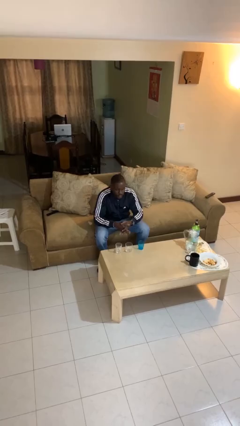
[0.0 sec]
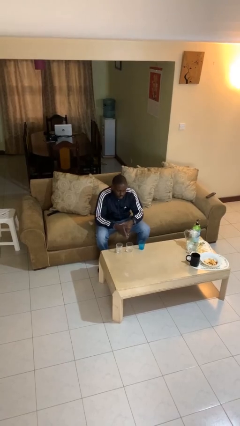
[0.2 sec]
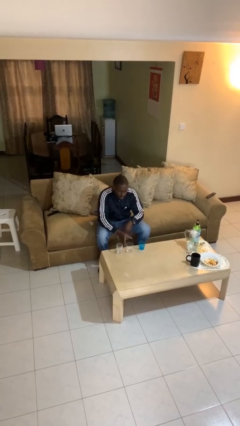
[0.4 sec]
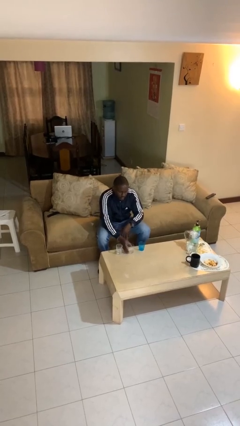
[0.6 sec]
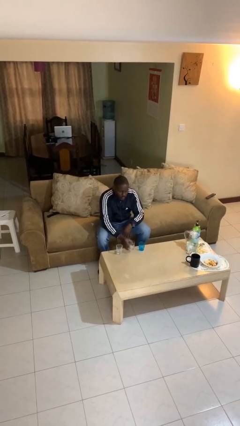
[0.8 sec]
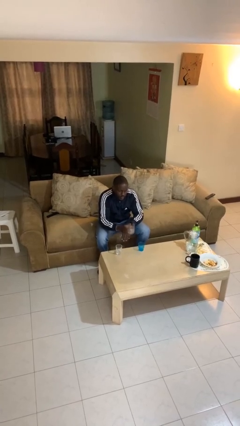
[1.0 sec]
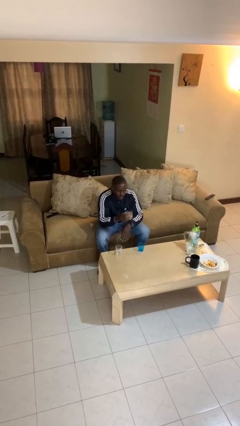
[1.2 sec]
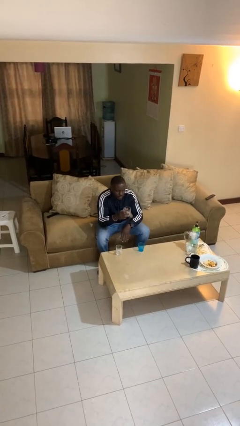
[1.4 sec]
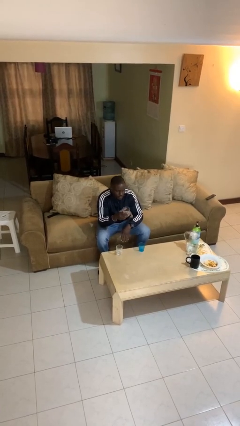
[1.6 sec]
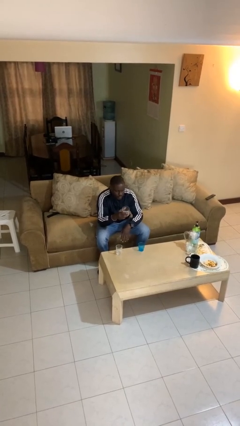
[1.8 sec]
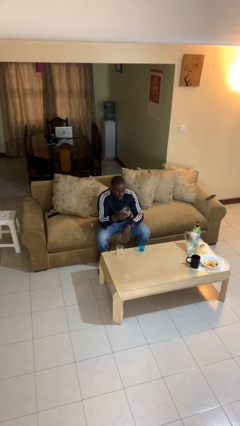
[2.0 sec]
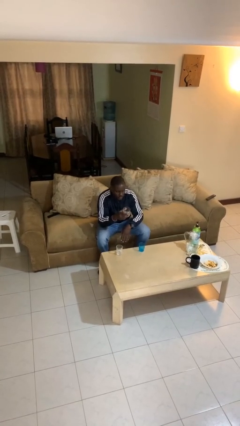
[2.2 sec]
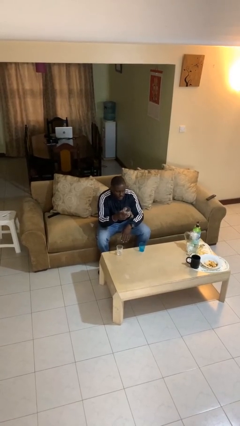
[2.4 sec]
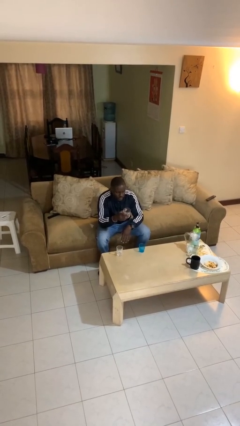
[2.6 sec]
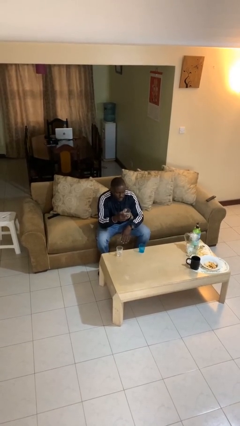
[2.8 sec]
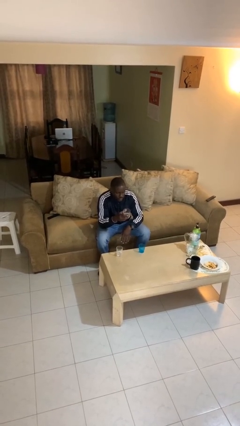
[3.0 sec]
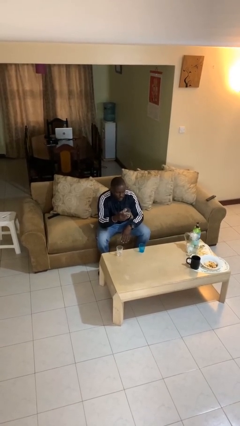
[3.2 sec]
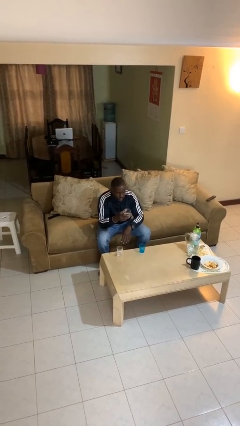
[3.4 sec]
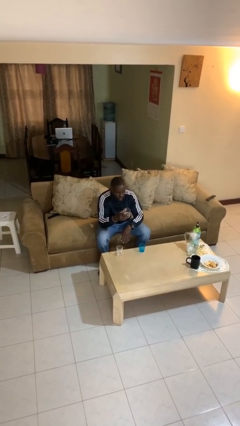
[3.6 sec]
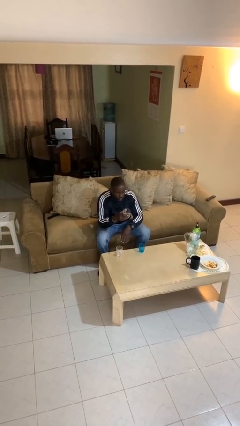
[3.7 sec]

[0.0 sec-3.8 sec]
person picks up object from table

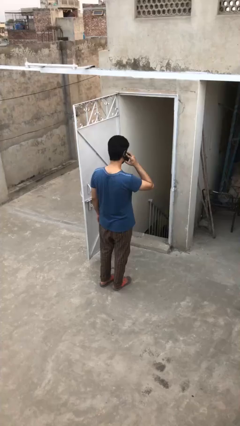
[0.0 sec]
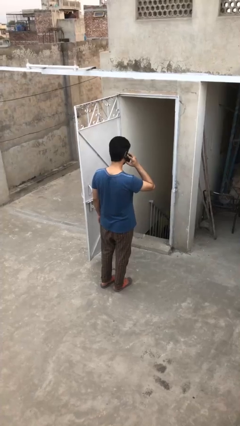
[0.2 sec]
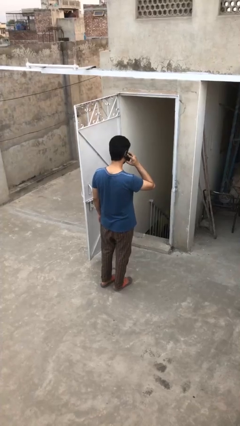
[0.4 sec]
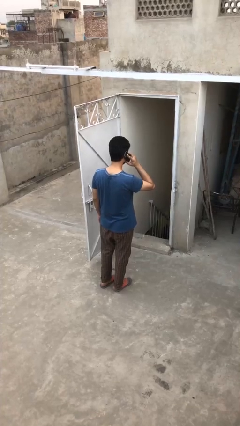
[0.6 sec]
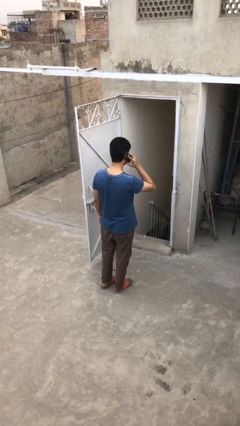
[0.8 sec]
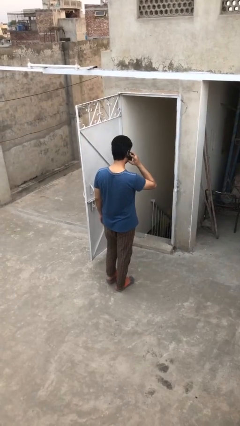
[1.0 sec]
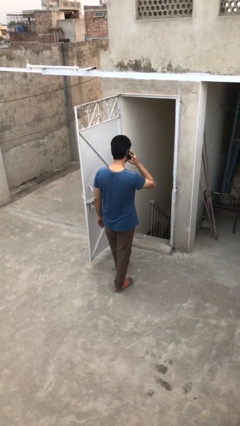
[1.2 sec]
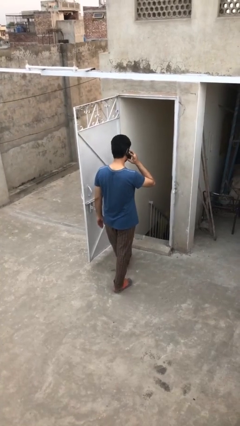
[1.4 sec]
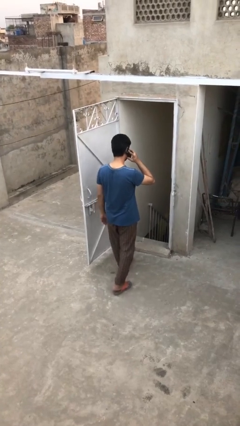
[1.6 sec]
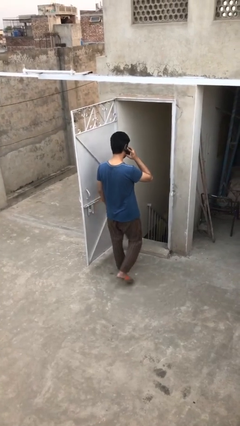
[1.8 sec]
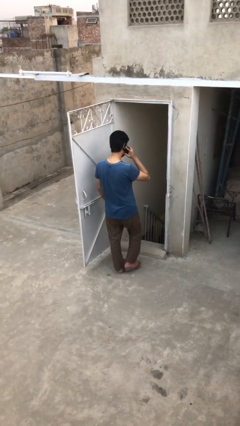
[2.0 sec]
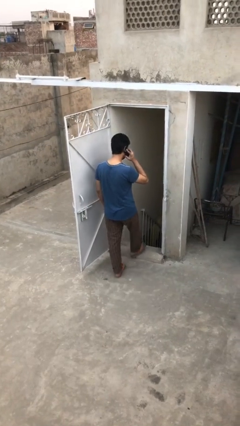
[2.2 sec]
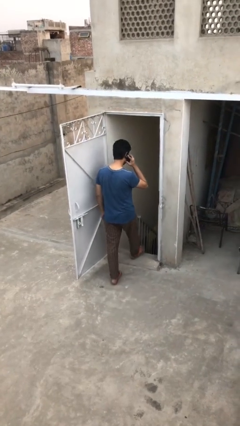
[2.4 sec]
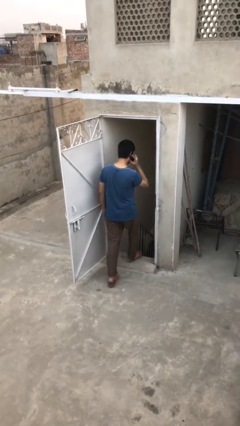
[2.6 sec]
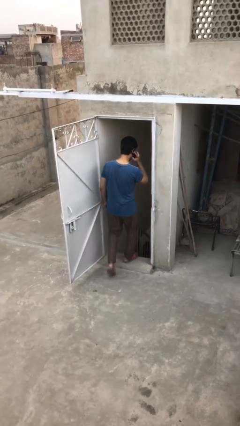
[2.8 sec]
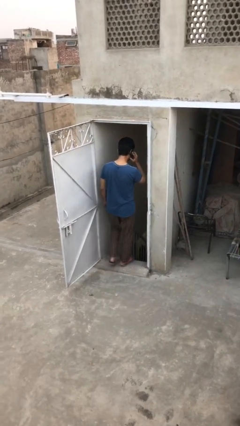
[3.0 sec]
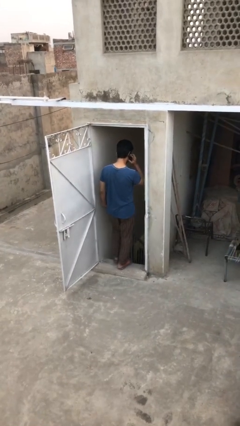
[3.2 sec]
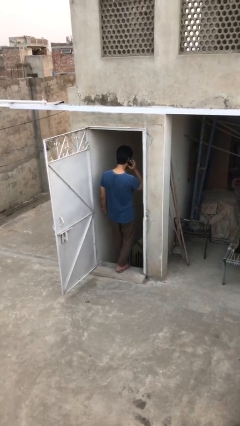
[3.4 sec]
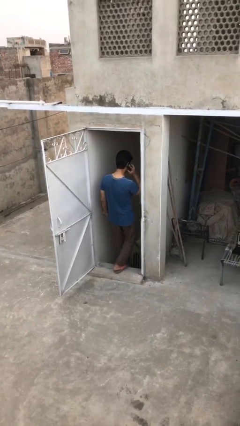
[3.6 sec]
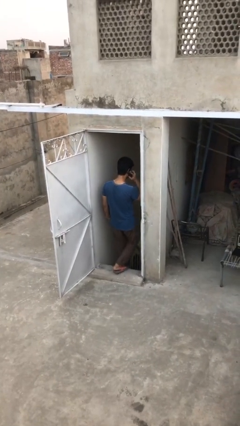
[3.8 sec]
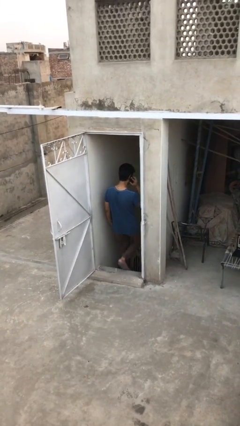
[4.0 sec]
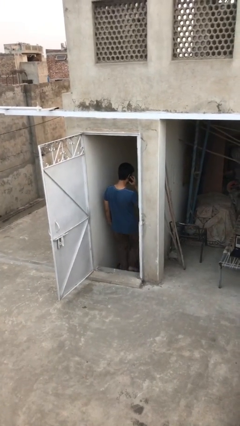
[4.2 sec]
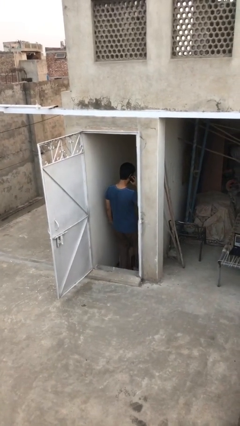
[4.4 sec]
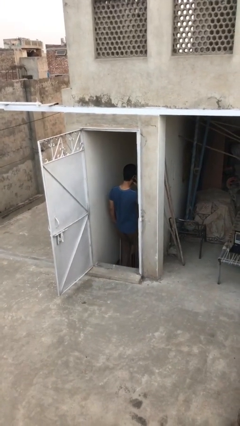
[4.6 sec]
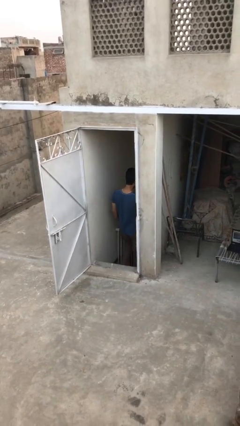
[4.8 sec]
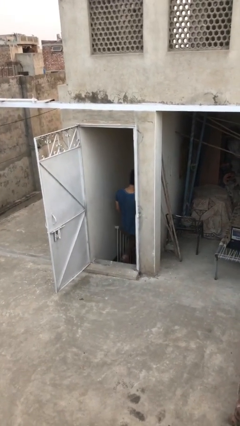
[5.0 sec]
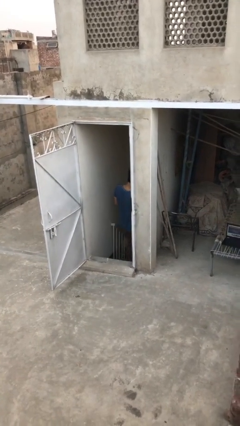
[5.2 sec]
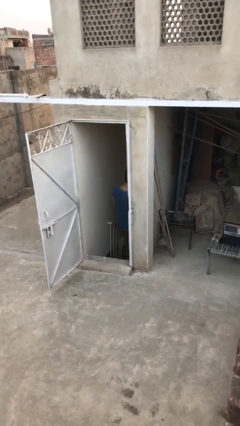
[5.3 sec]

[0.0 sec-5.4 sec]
person exits scene through structure

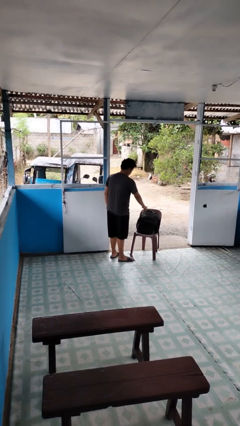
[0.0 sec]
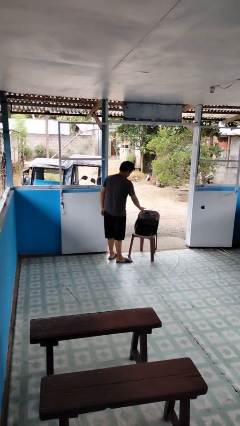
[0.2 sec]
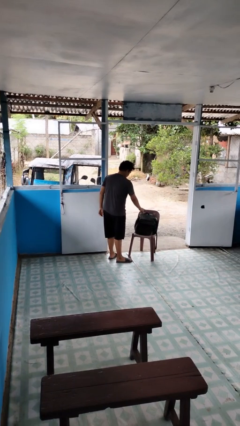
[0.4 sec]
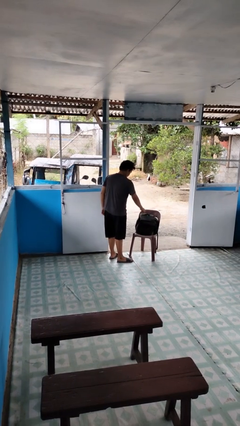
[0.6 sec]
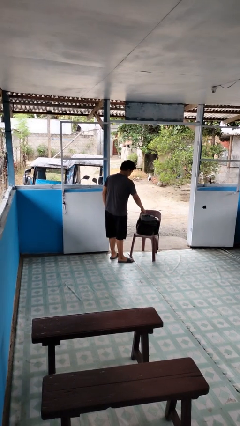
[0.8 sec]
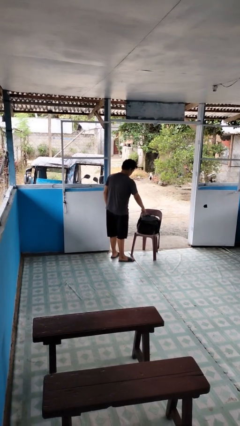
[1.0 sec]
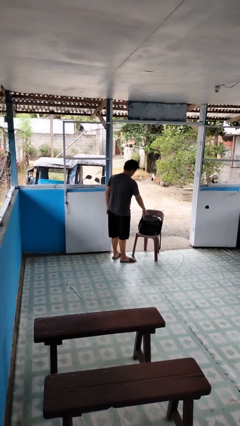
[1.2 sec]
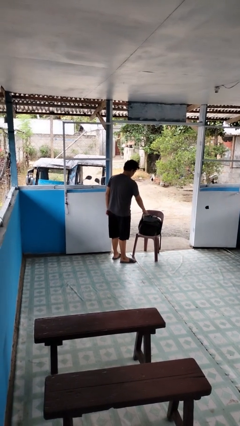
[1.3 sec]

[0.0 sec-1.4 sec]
person taps object with finger

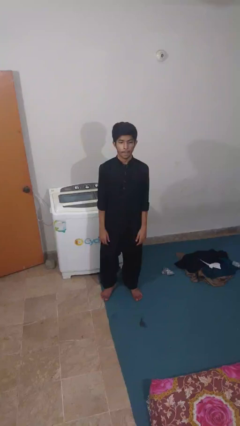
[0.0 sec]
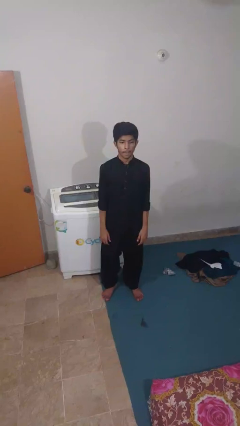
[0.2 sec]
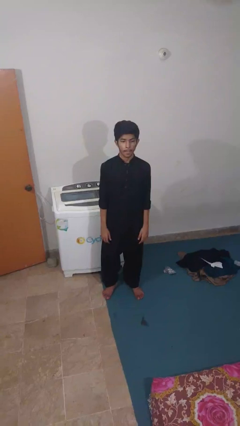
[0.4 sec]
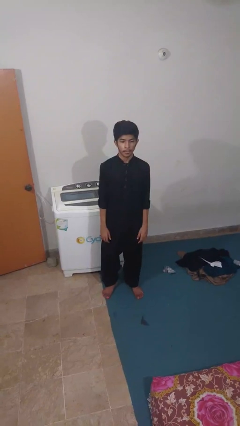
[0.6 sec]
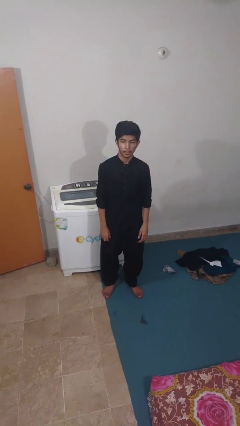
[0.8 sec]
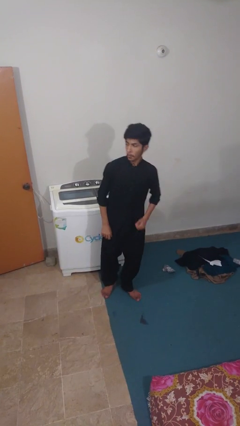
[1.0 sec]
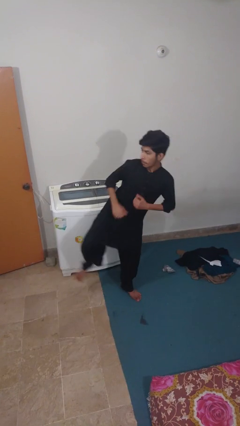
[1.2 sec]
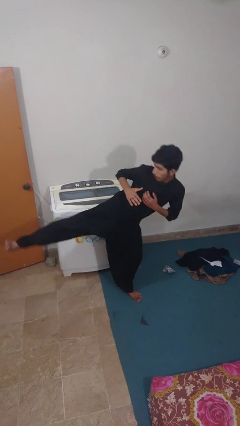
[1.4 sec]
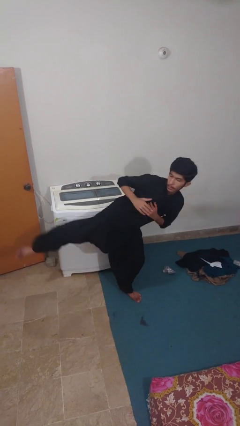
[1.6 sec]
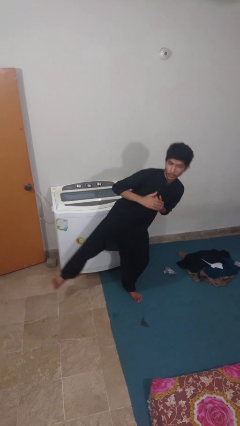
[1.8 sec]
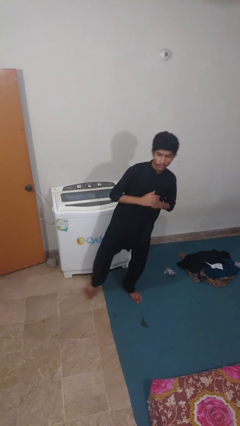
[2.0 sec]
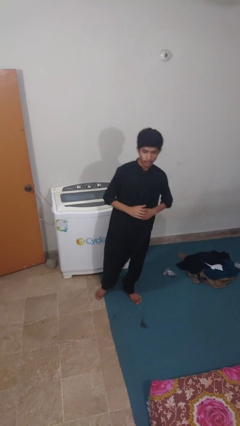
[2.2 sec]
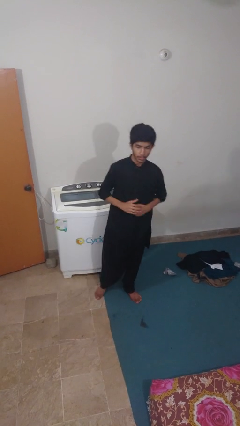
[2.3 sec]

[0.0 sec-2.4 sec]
person karate kicks

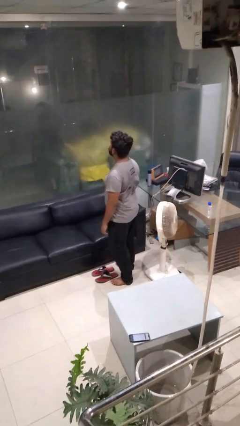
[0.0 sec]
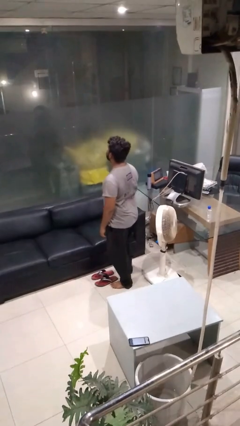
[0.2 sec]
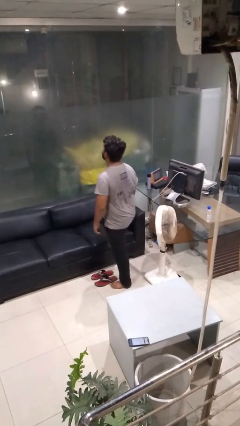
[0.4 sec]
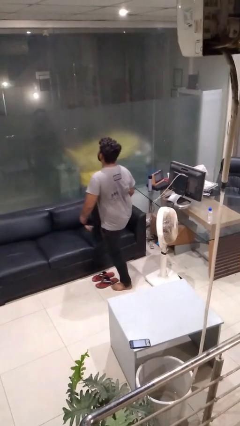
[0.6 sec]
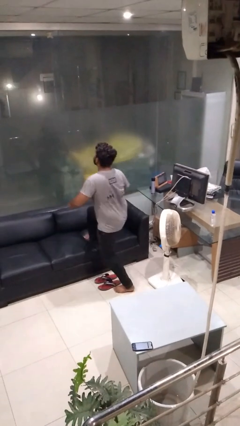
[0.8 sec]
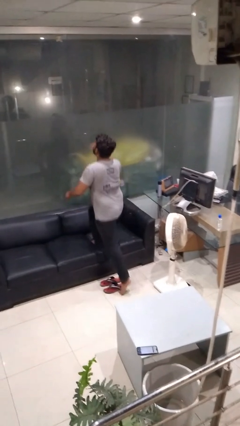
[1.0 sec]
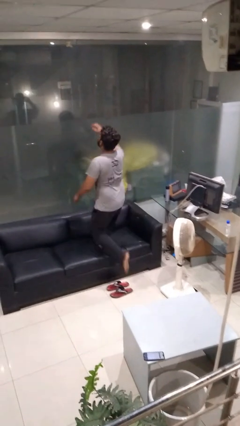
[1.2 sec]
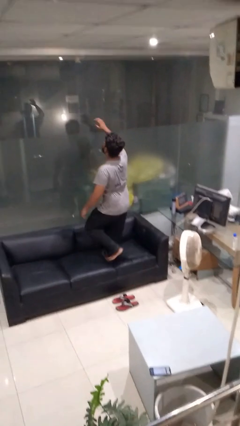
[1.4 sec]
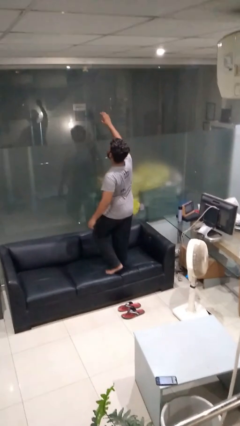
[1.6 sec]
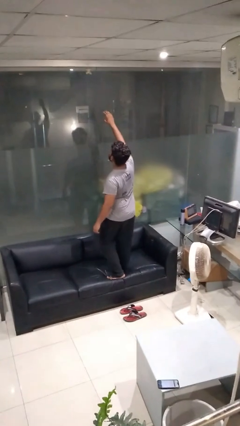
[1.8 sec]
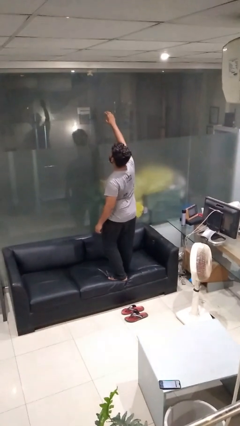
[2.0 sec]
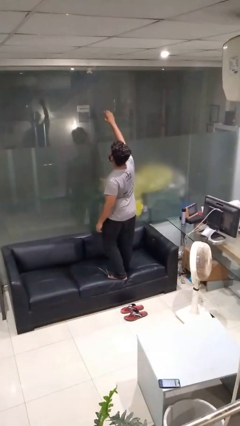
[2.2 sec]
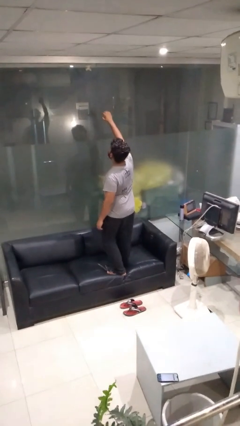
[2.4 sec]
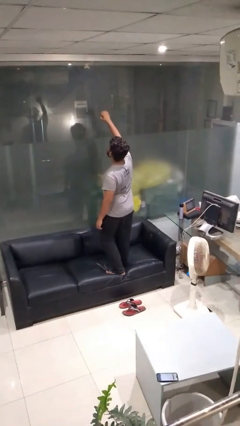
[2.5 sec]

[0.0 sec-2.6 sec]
person climbs on couch

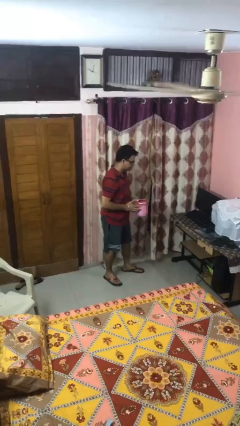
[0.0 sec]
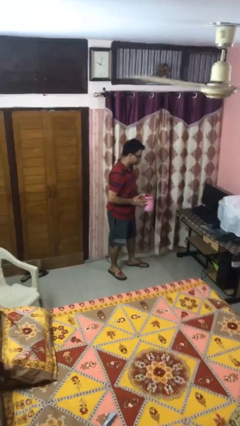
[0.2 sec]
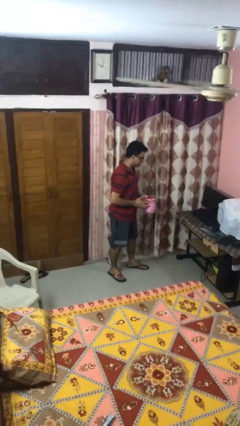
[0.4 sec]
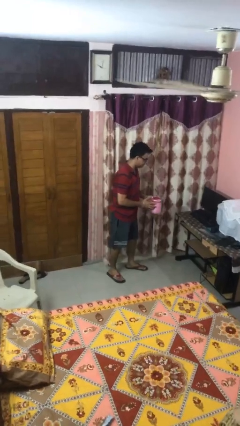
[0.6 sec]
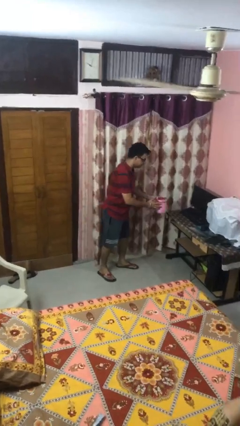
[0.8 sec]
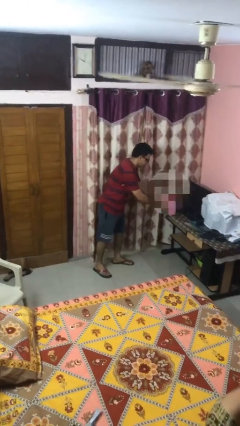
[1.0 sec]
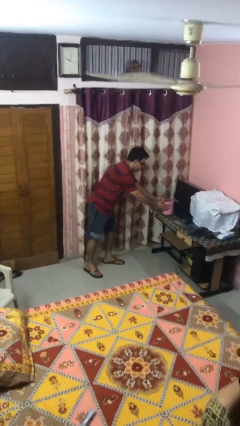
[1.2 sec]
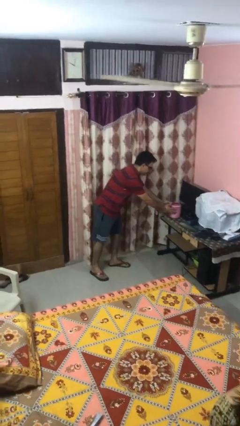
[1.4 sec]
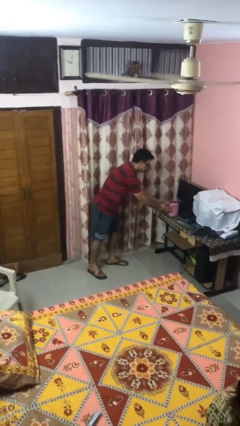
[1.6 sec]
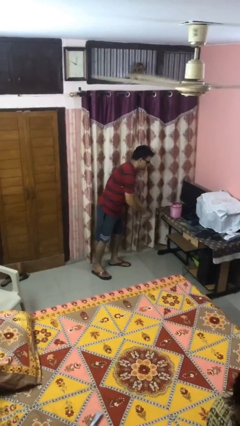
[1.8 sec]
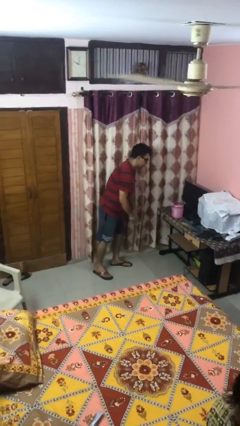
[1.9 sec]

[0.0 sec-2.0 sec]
person puts down object on countertop
